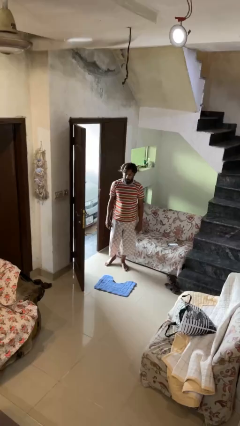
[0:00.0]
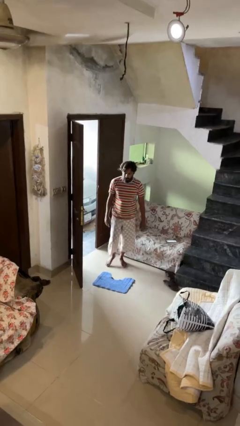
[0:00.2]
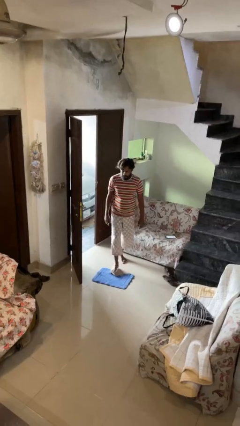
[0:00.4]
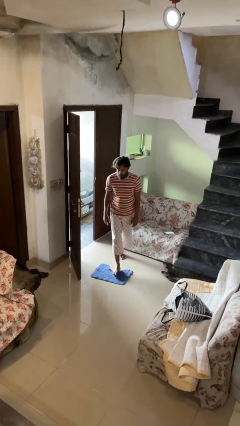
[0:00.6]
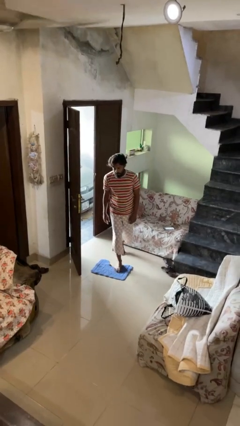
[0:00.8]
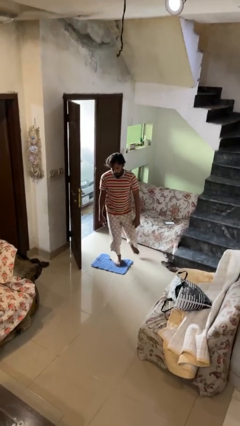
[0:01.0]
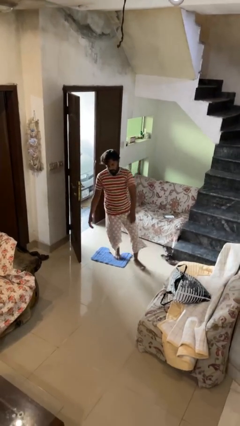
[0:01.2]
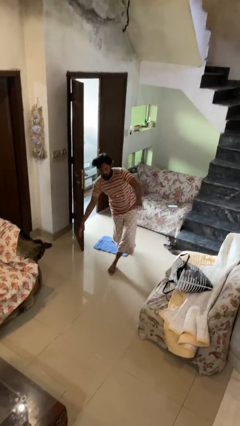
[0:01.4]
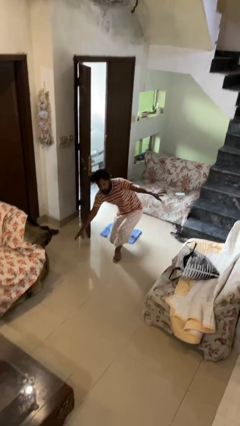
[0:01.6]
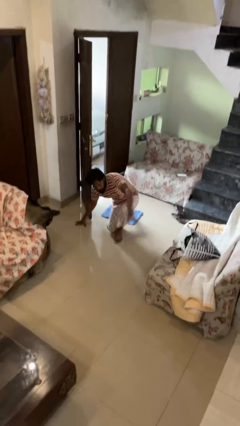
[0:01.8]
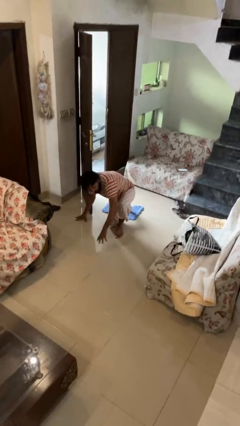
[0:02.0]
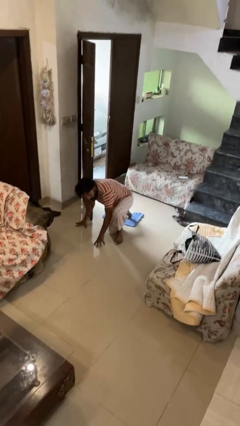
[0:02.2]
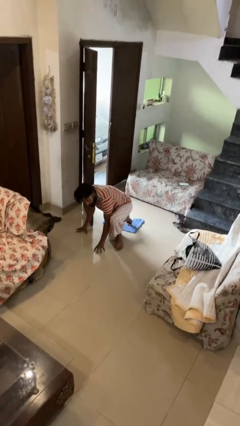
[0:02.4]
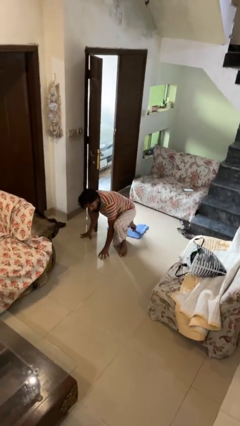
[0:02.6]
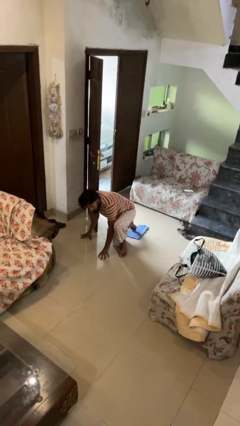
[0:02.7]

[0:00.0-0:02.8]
person trips on object on floor

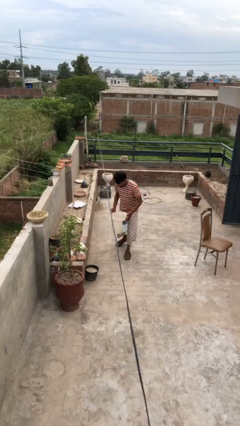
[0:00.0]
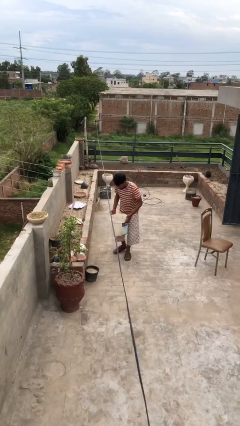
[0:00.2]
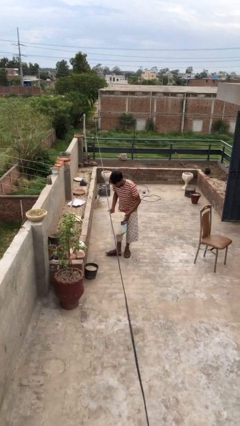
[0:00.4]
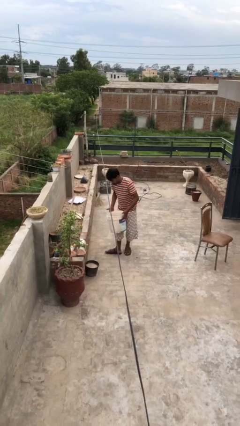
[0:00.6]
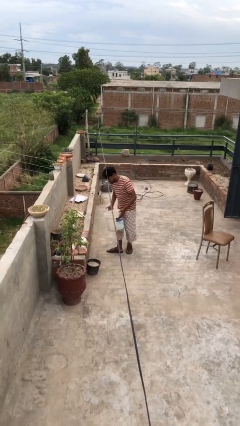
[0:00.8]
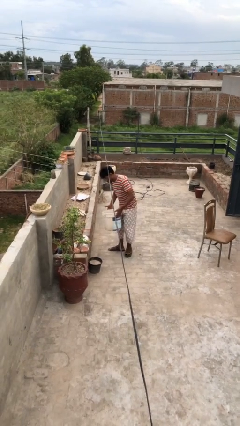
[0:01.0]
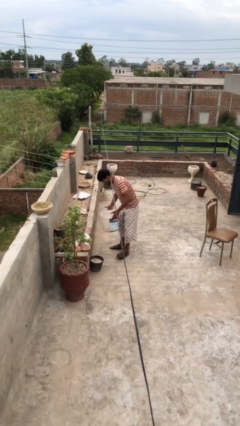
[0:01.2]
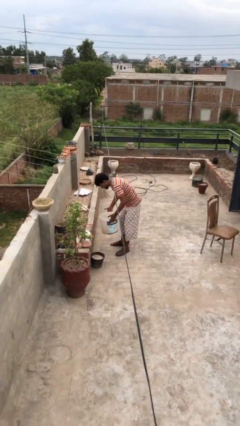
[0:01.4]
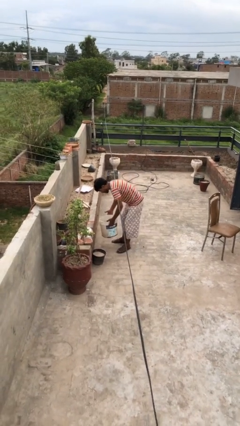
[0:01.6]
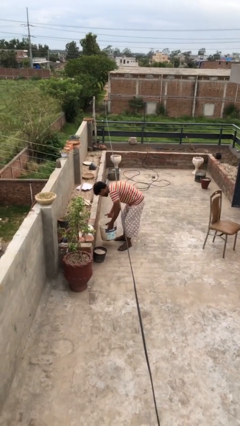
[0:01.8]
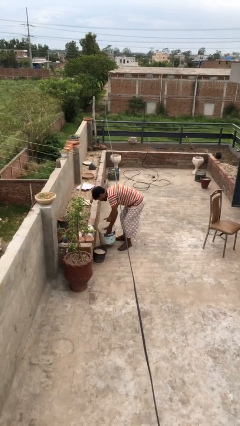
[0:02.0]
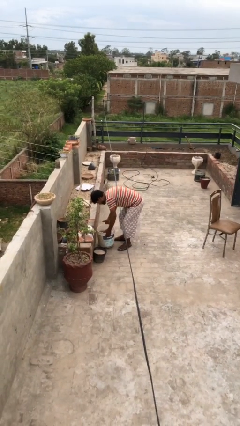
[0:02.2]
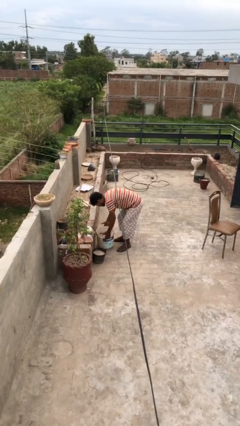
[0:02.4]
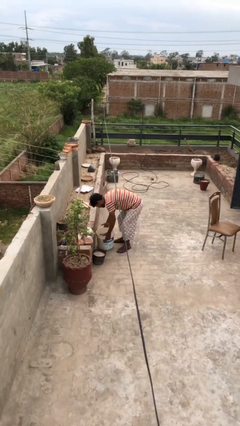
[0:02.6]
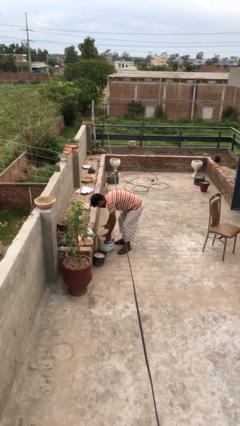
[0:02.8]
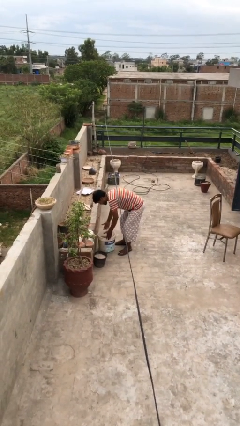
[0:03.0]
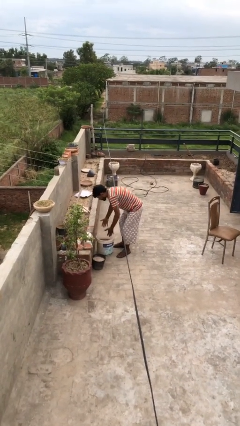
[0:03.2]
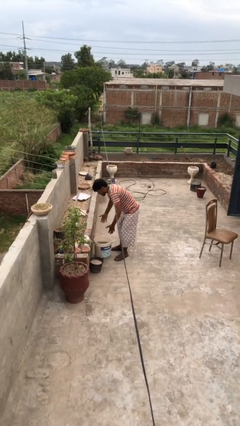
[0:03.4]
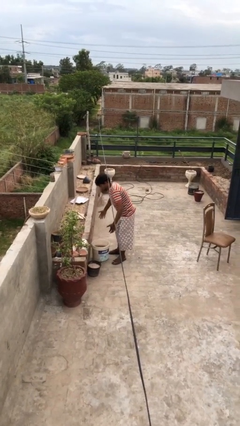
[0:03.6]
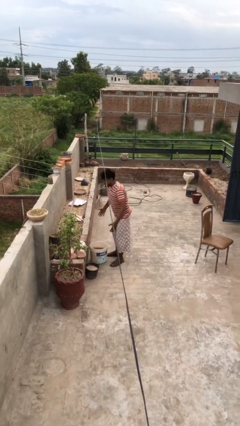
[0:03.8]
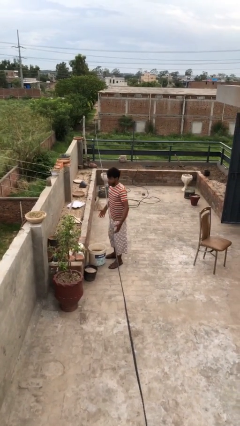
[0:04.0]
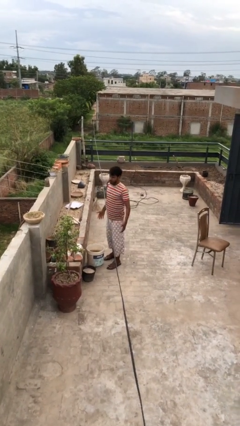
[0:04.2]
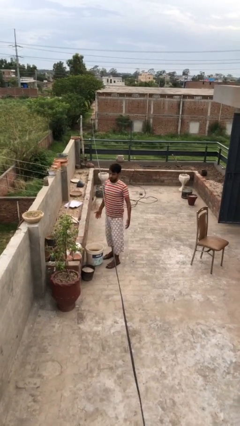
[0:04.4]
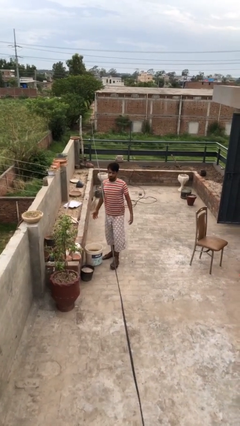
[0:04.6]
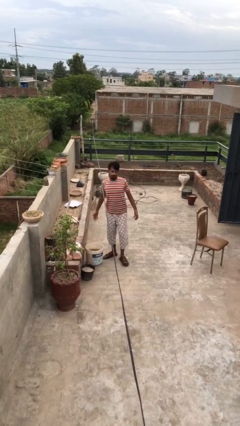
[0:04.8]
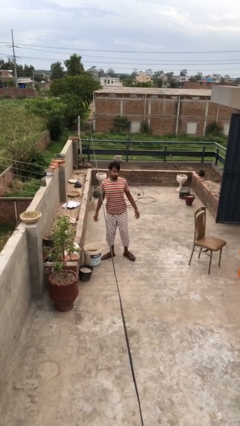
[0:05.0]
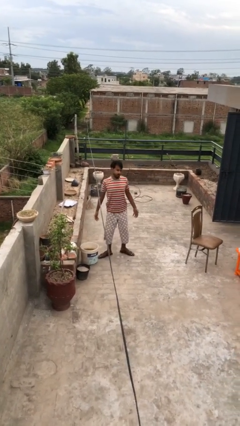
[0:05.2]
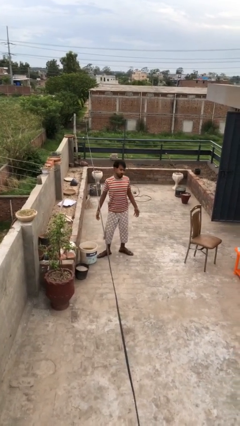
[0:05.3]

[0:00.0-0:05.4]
person puts down object on floor

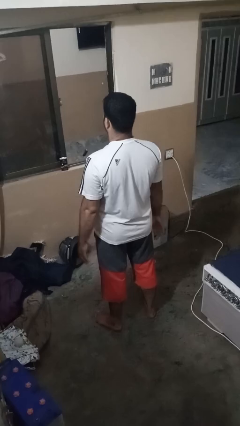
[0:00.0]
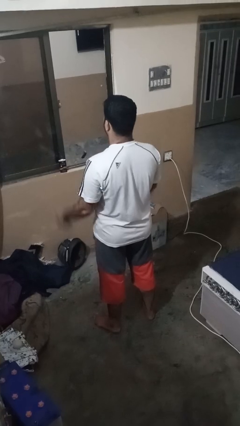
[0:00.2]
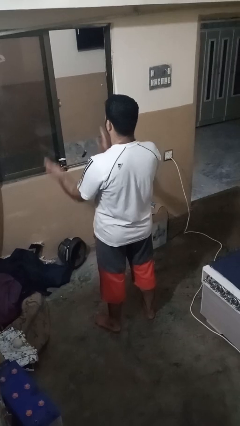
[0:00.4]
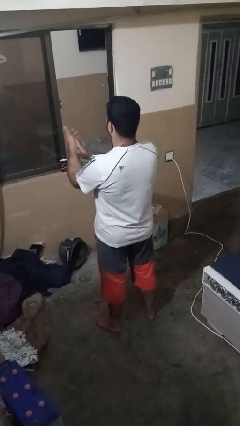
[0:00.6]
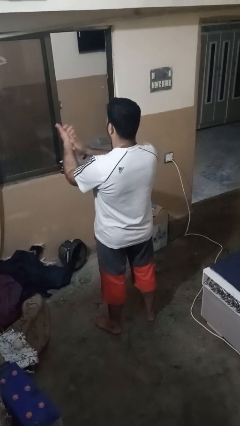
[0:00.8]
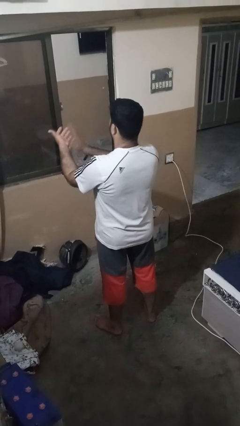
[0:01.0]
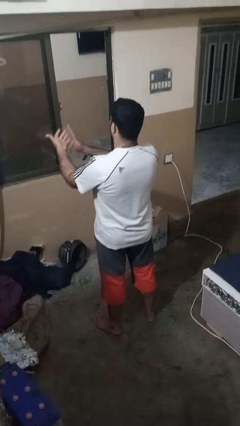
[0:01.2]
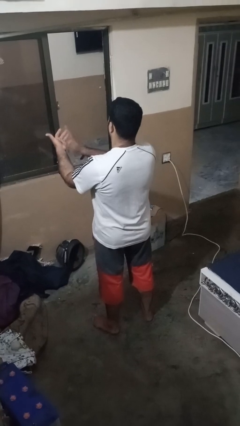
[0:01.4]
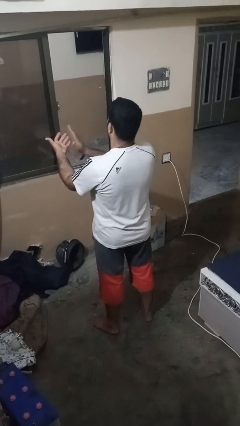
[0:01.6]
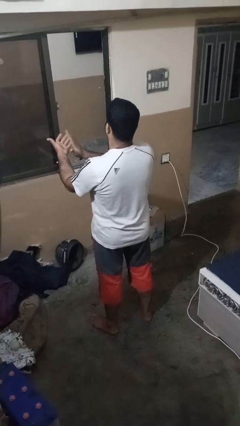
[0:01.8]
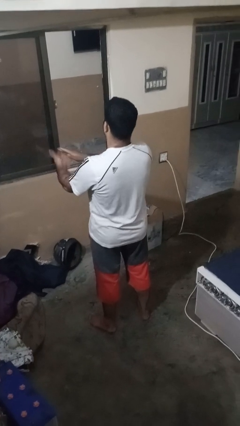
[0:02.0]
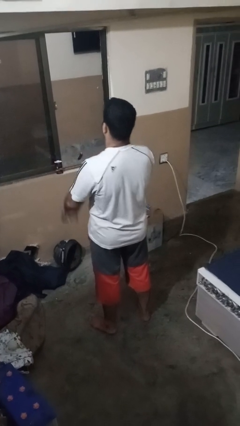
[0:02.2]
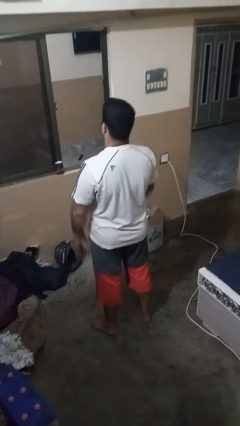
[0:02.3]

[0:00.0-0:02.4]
person claps hands

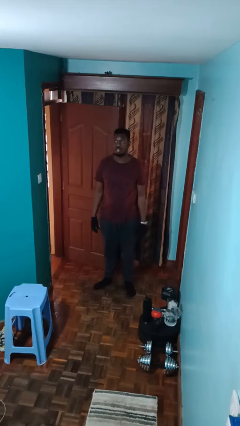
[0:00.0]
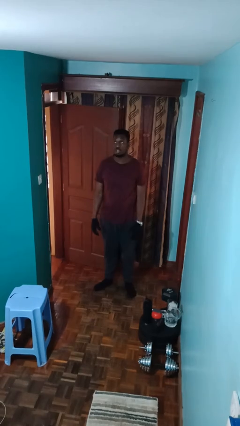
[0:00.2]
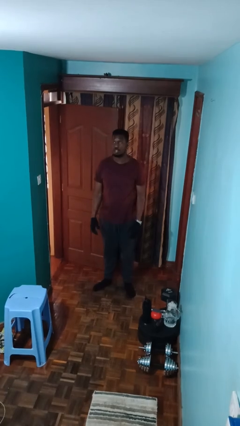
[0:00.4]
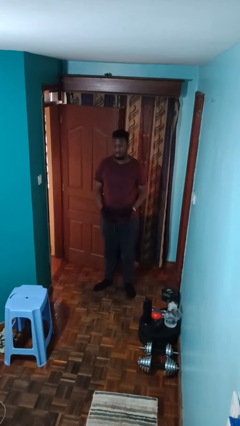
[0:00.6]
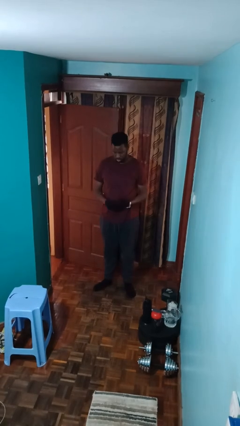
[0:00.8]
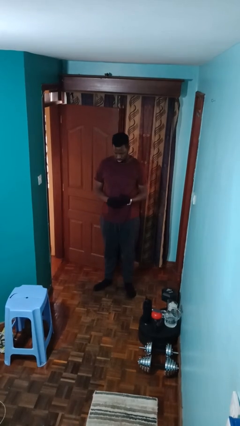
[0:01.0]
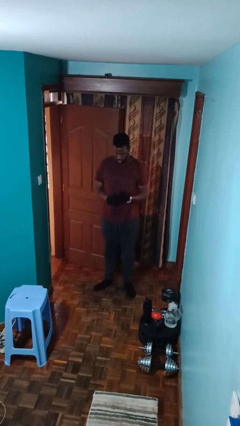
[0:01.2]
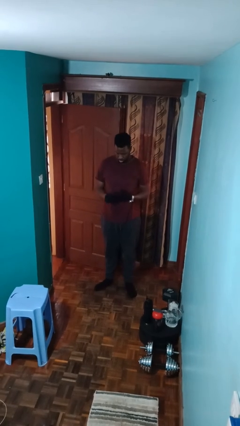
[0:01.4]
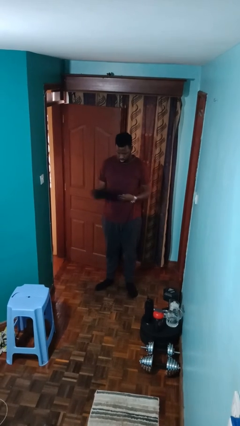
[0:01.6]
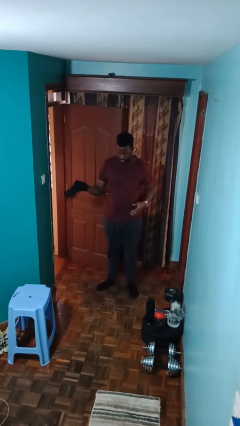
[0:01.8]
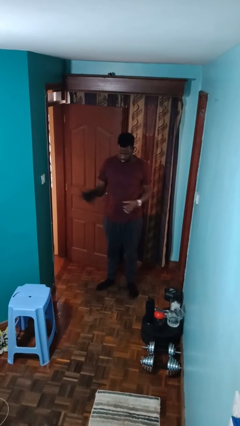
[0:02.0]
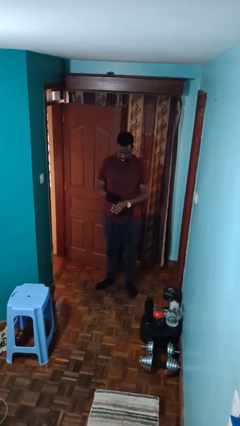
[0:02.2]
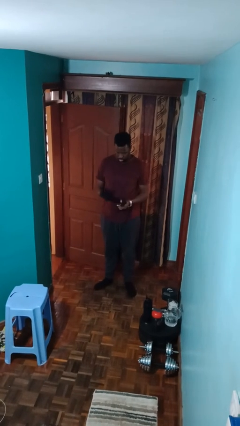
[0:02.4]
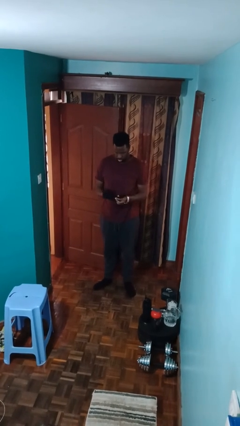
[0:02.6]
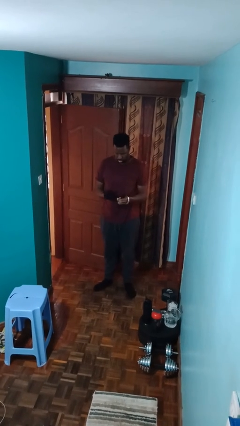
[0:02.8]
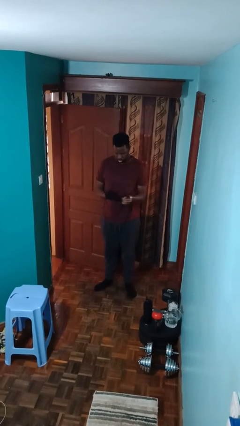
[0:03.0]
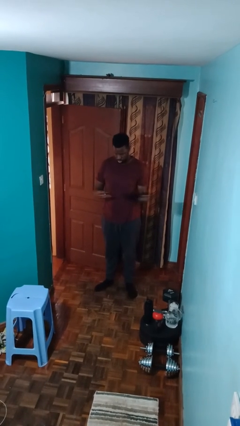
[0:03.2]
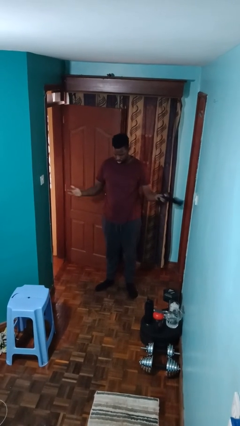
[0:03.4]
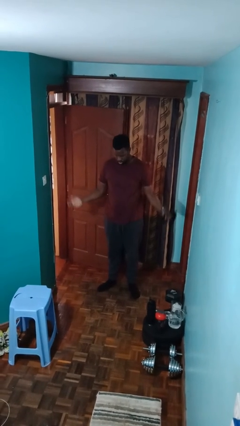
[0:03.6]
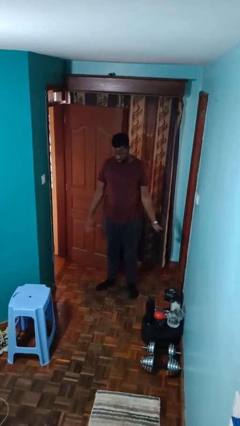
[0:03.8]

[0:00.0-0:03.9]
person takes off gloves

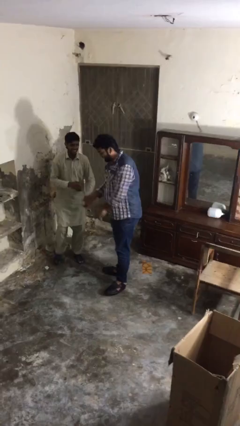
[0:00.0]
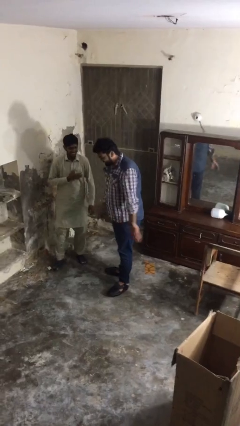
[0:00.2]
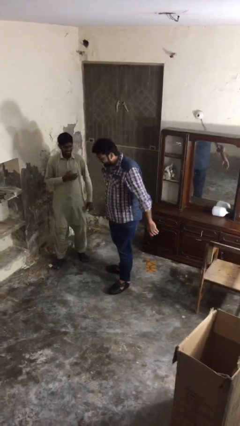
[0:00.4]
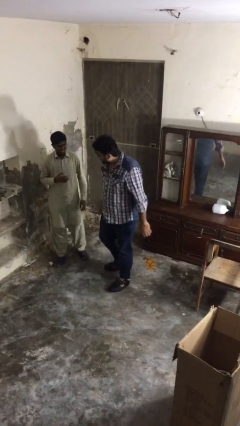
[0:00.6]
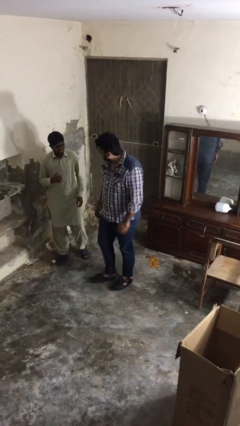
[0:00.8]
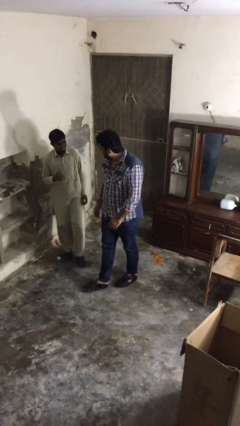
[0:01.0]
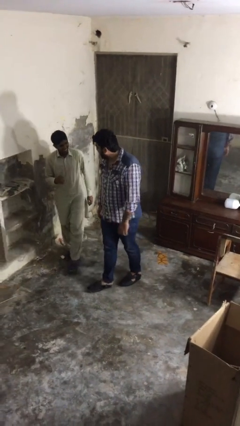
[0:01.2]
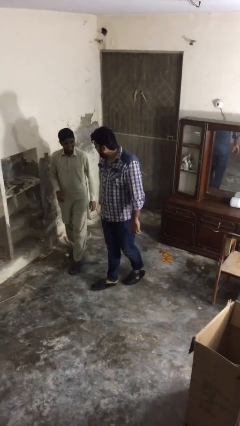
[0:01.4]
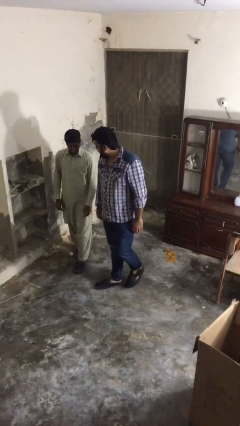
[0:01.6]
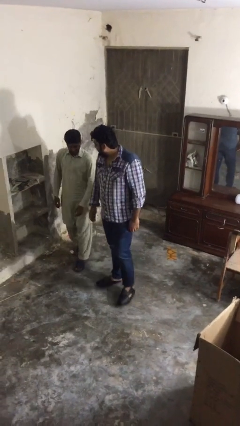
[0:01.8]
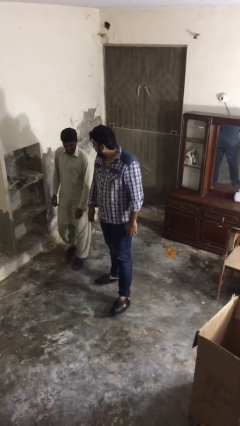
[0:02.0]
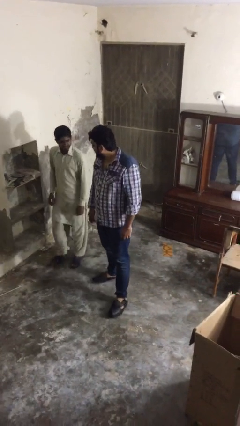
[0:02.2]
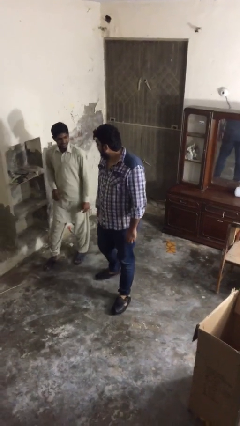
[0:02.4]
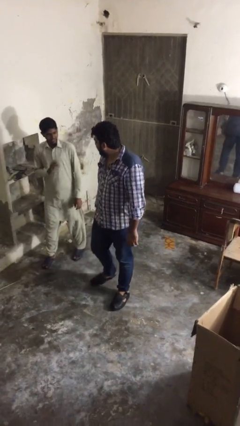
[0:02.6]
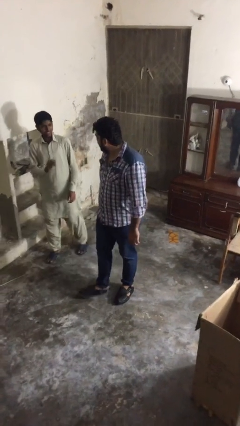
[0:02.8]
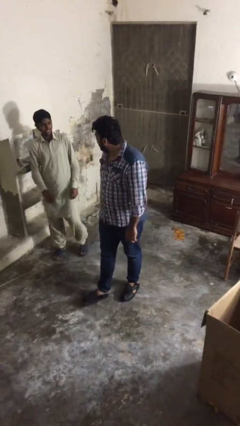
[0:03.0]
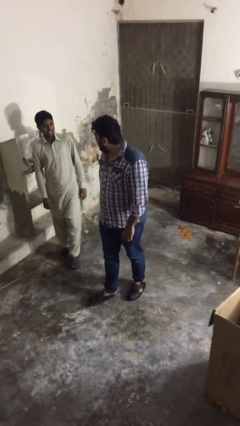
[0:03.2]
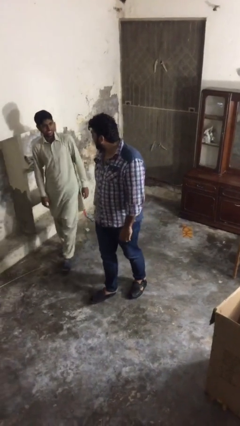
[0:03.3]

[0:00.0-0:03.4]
person talks to person
